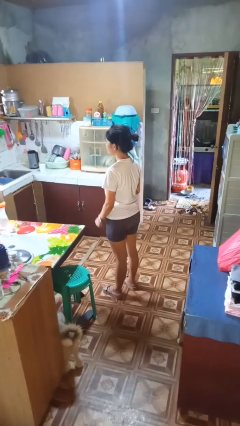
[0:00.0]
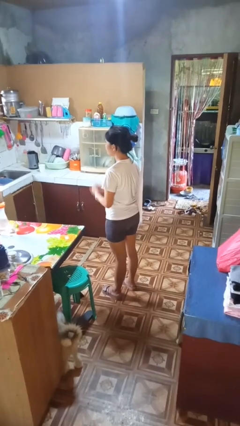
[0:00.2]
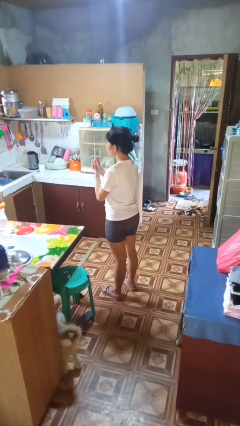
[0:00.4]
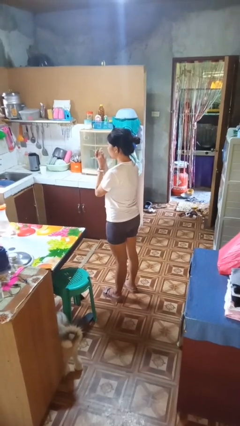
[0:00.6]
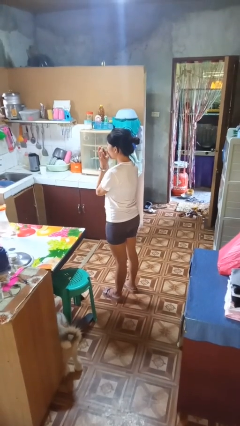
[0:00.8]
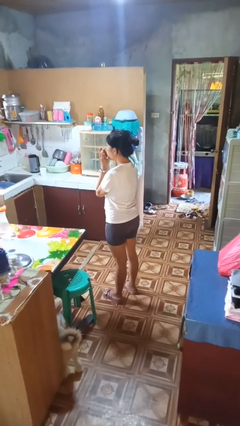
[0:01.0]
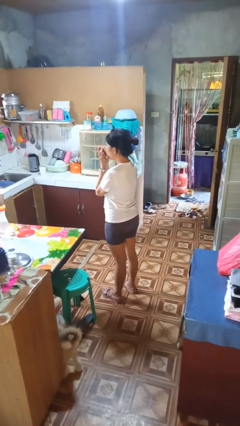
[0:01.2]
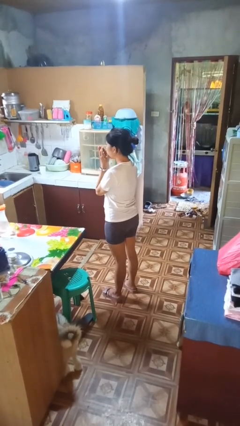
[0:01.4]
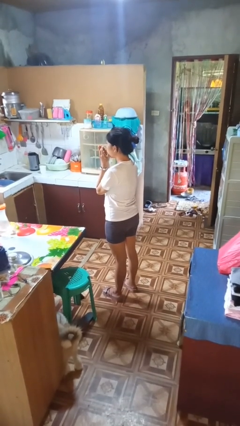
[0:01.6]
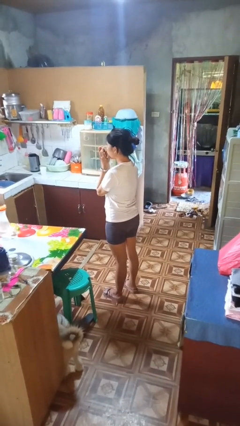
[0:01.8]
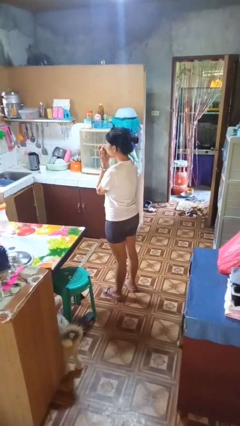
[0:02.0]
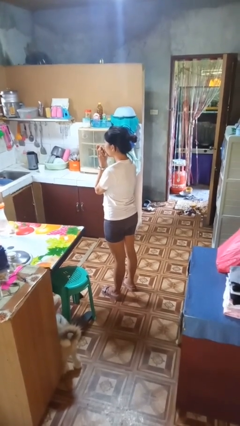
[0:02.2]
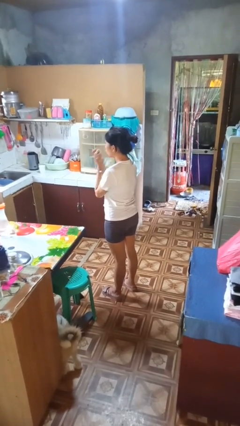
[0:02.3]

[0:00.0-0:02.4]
person blows into hands

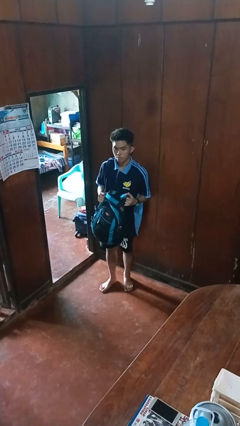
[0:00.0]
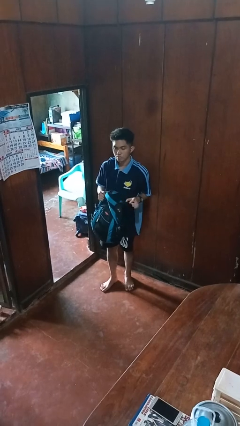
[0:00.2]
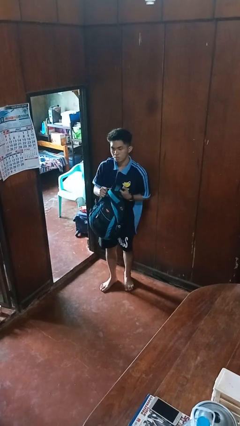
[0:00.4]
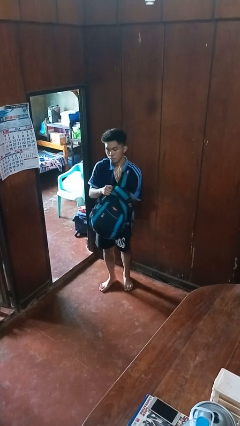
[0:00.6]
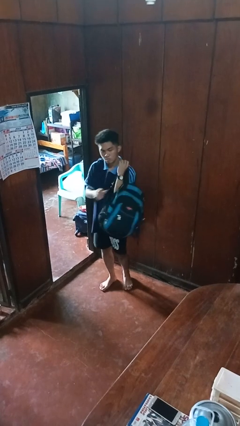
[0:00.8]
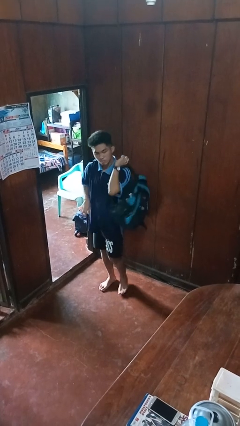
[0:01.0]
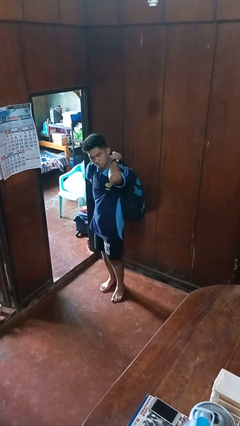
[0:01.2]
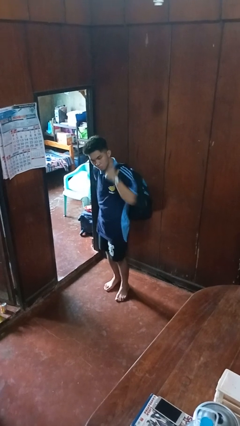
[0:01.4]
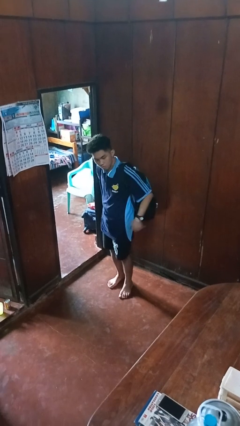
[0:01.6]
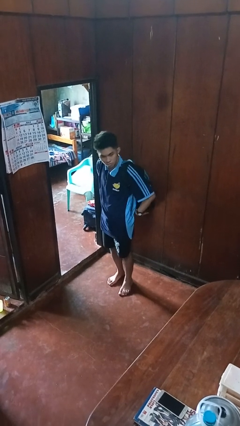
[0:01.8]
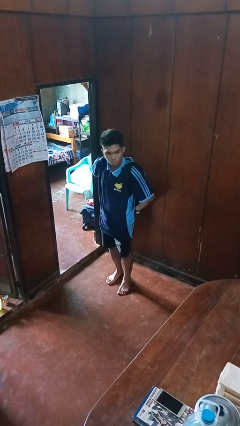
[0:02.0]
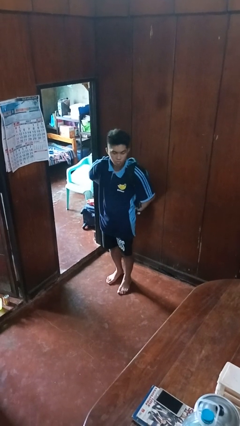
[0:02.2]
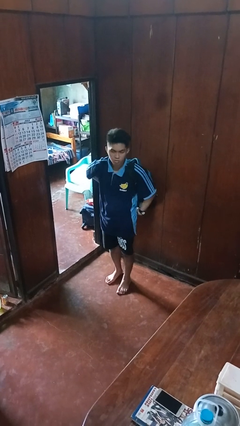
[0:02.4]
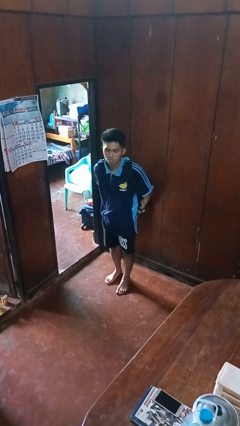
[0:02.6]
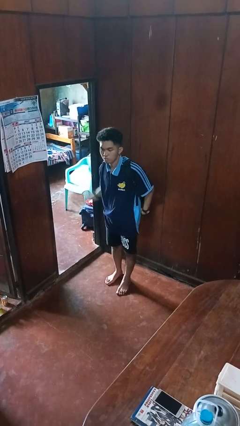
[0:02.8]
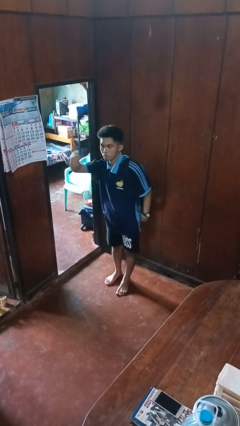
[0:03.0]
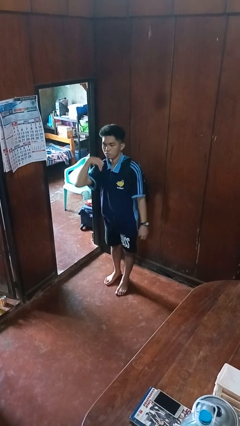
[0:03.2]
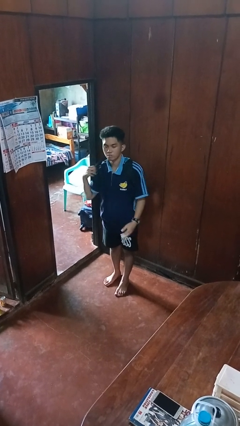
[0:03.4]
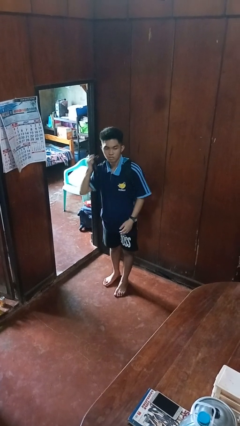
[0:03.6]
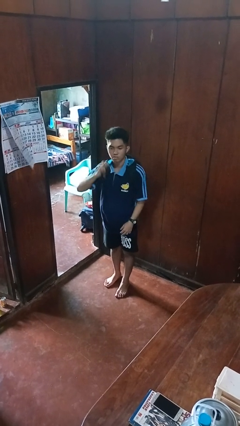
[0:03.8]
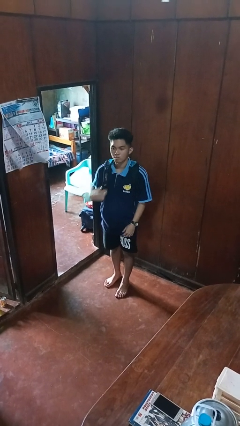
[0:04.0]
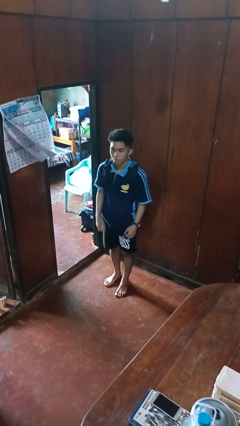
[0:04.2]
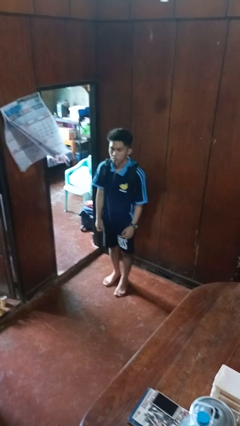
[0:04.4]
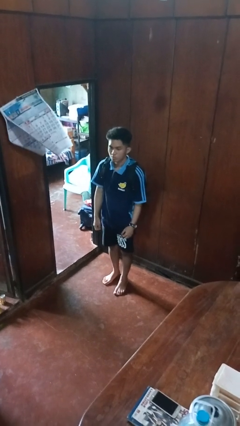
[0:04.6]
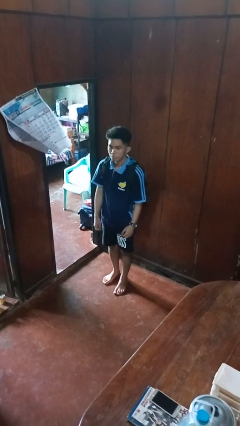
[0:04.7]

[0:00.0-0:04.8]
person puts on backpack

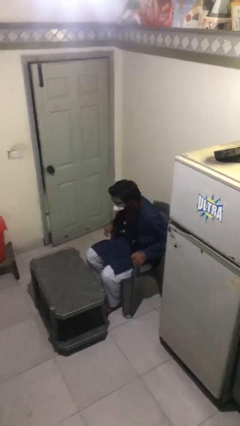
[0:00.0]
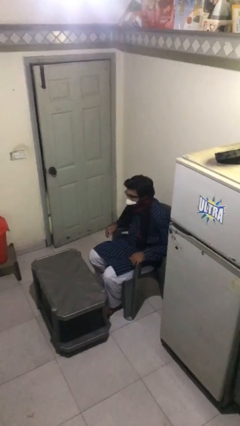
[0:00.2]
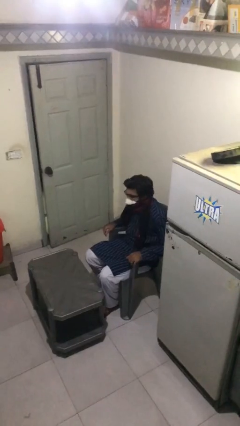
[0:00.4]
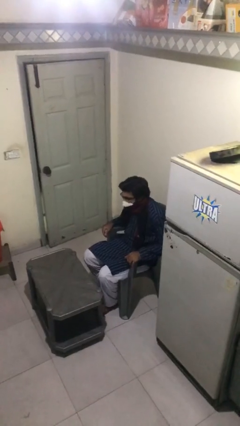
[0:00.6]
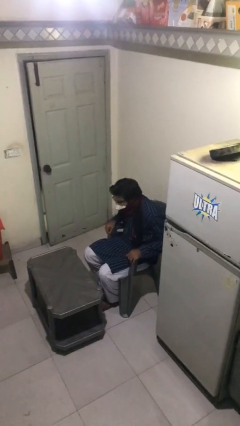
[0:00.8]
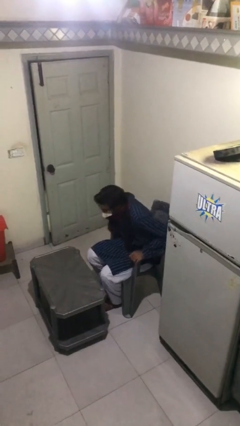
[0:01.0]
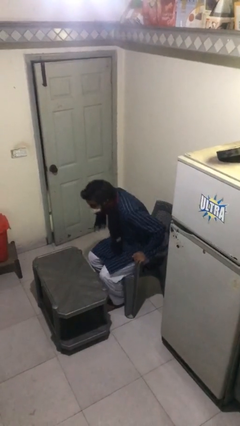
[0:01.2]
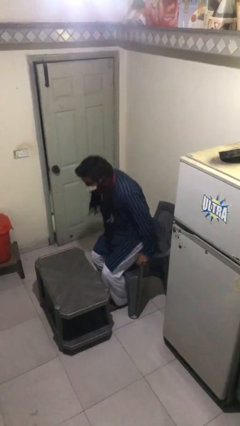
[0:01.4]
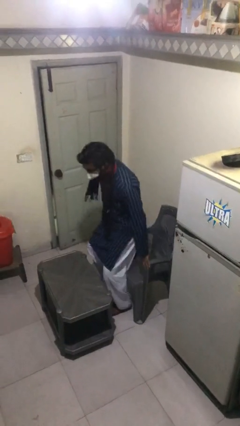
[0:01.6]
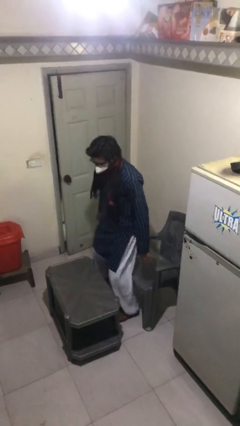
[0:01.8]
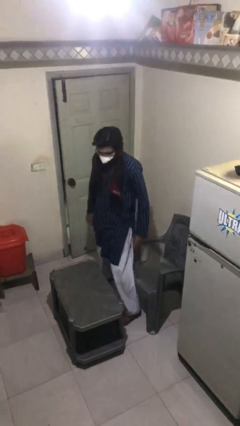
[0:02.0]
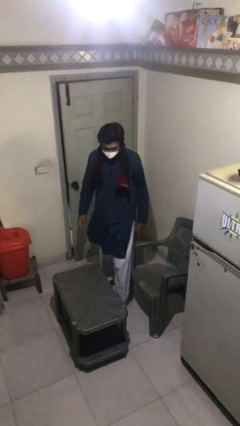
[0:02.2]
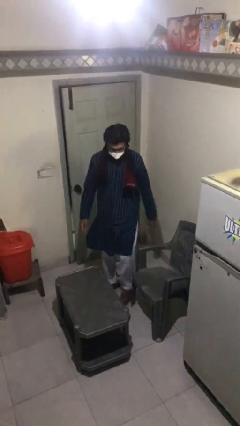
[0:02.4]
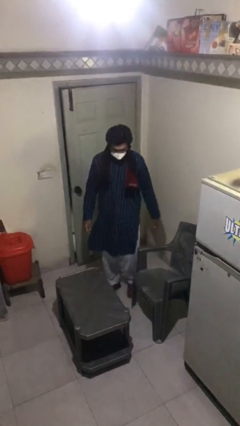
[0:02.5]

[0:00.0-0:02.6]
person stands up

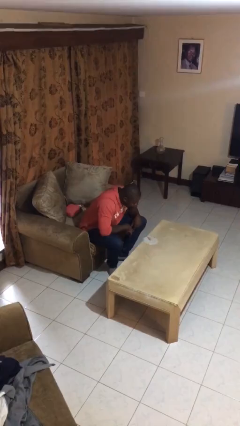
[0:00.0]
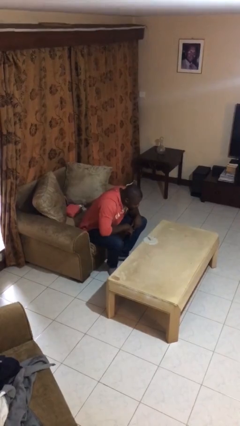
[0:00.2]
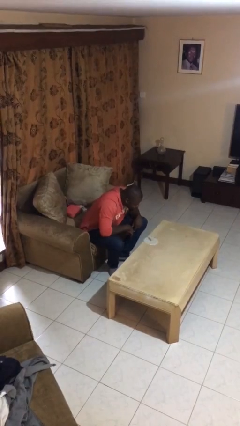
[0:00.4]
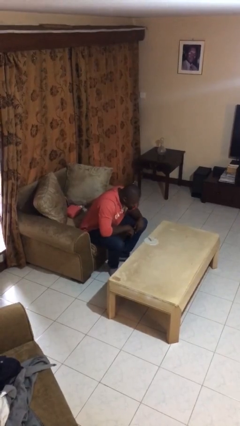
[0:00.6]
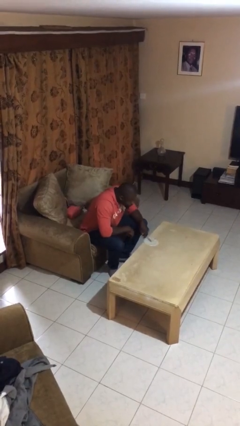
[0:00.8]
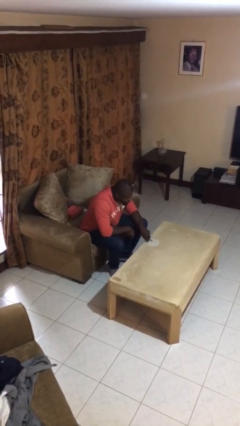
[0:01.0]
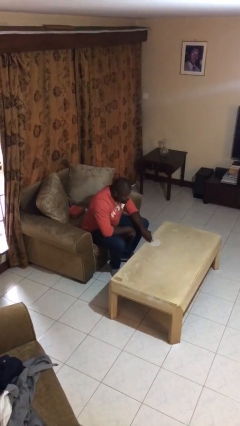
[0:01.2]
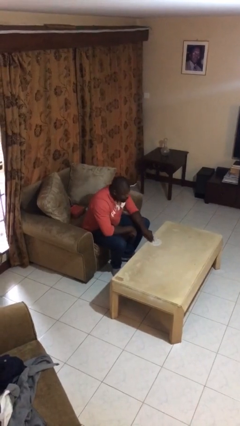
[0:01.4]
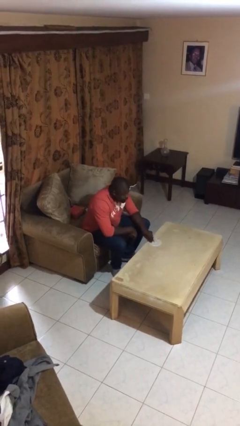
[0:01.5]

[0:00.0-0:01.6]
person extinguishes candle

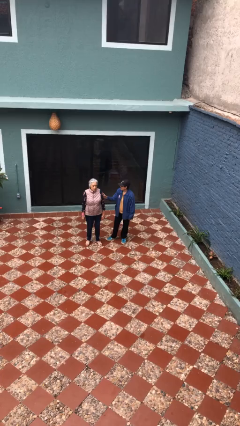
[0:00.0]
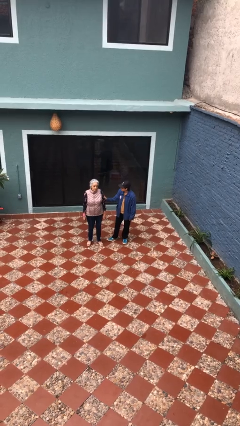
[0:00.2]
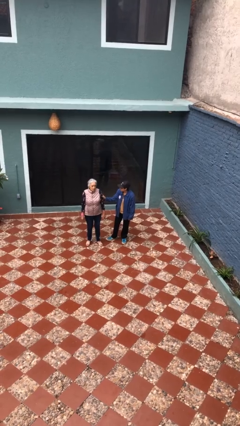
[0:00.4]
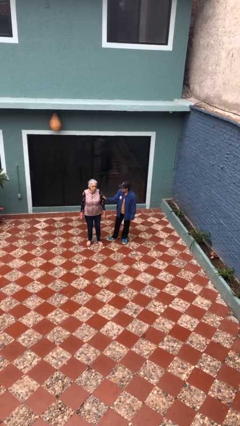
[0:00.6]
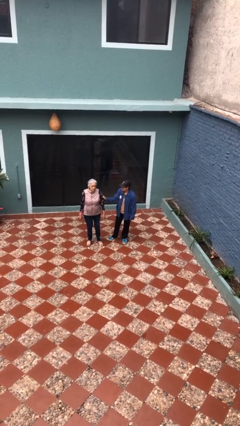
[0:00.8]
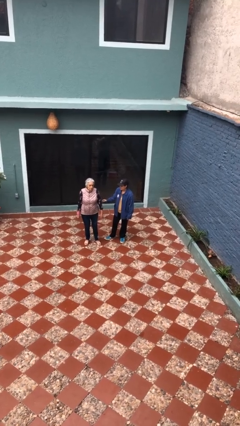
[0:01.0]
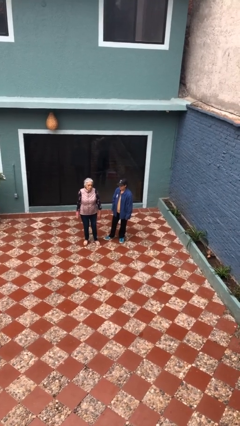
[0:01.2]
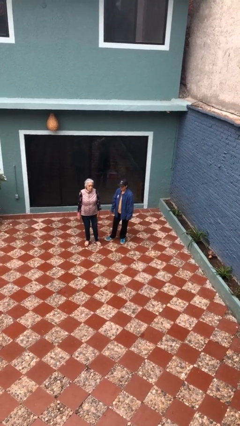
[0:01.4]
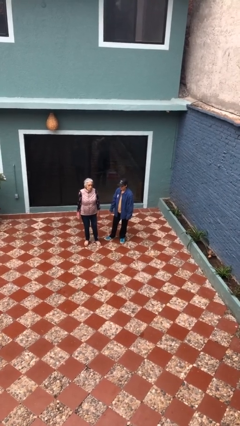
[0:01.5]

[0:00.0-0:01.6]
person grabs person by forearm

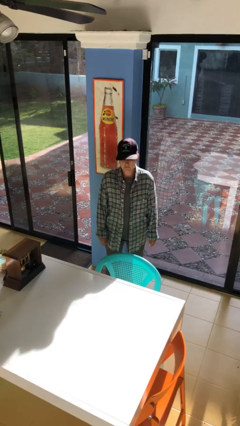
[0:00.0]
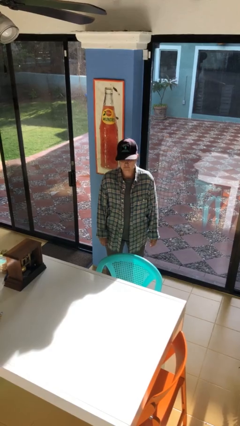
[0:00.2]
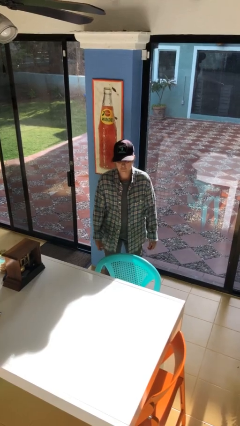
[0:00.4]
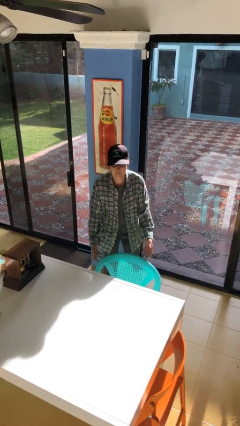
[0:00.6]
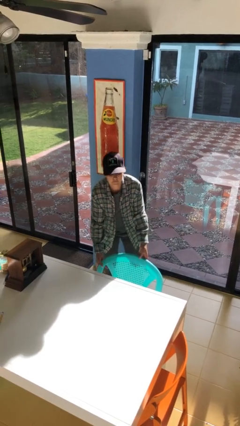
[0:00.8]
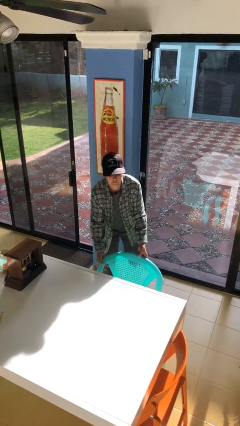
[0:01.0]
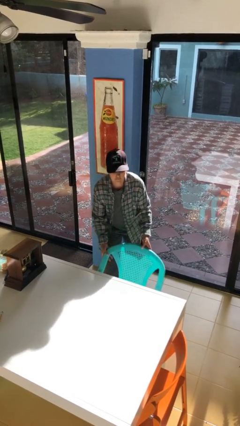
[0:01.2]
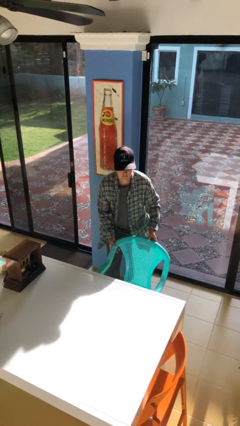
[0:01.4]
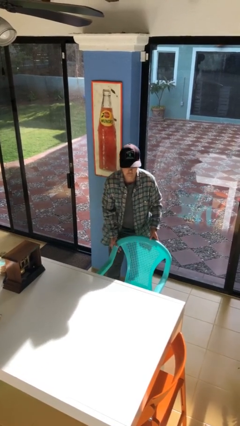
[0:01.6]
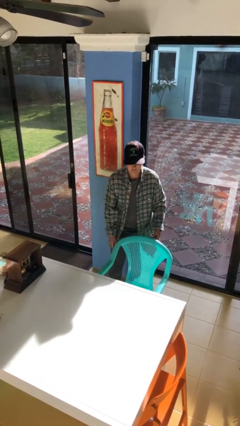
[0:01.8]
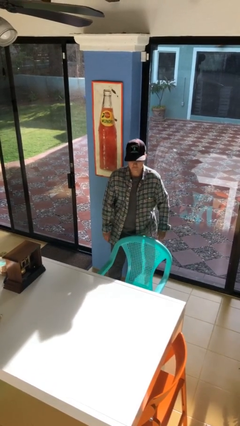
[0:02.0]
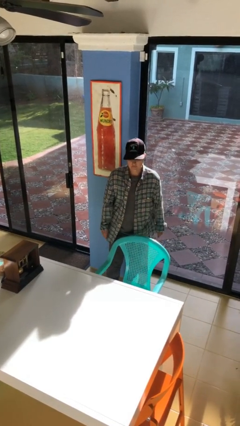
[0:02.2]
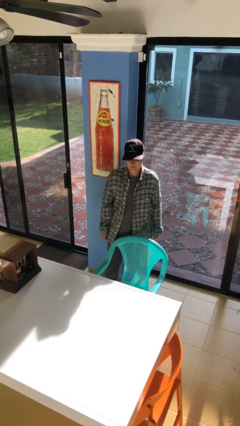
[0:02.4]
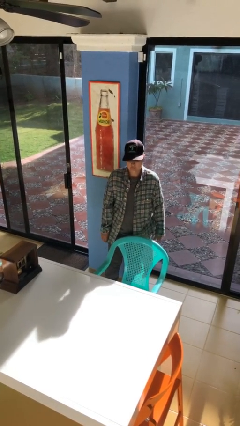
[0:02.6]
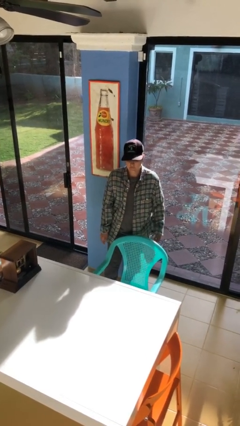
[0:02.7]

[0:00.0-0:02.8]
person pulls out chair

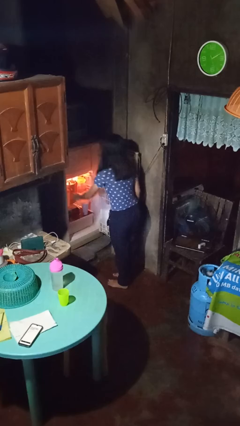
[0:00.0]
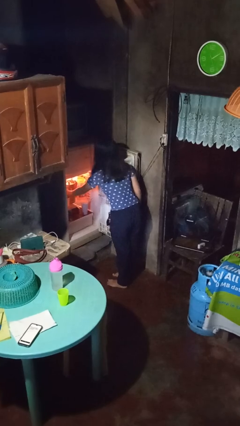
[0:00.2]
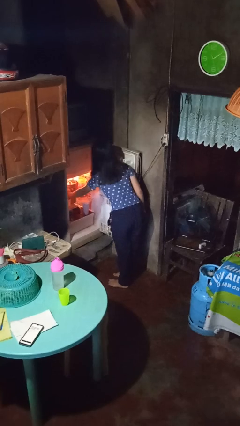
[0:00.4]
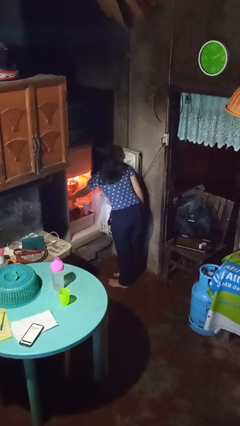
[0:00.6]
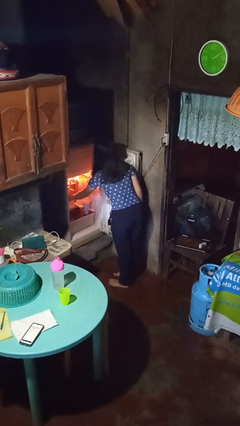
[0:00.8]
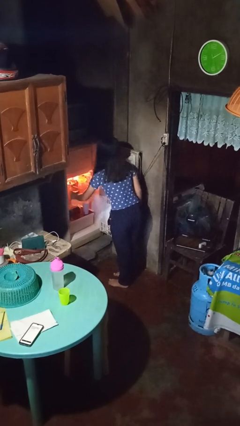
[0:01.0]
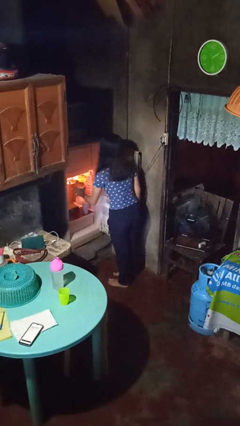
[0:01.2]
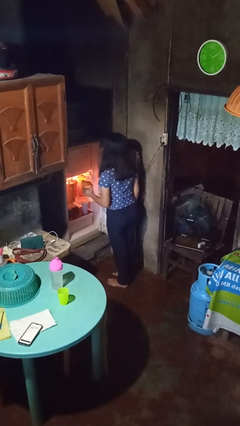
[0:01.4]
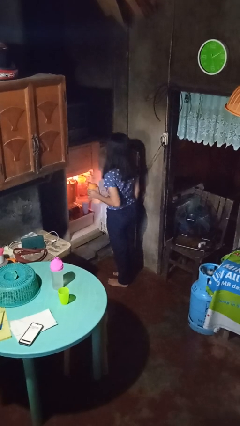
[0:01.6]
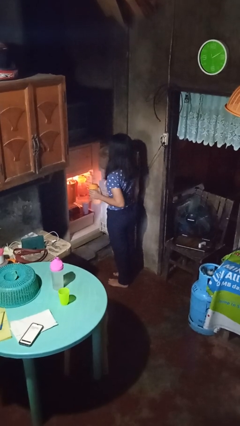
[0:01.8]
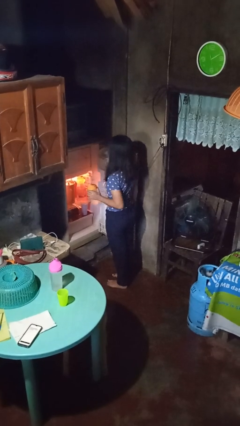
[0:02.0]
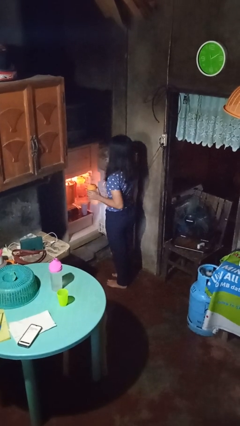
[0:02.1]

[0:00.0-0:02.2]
person takes object from refrigerator
